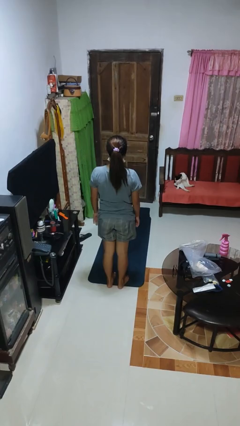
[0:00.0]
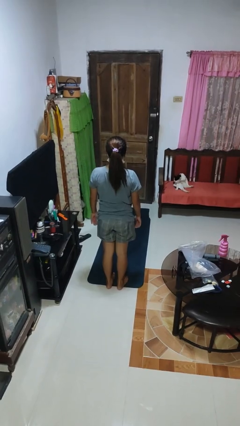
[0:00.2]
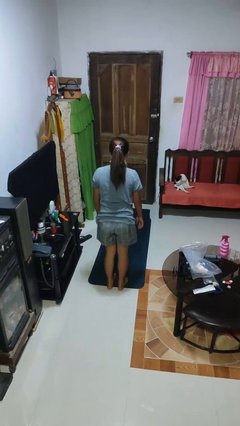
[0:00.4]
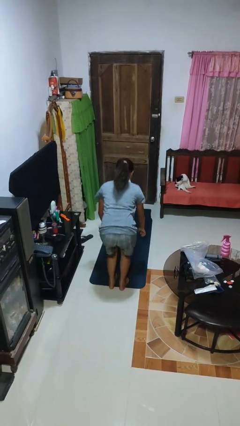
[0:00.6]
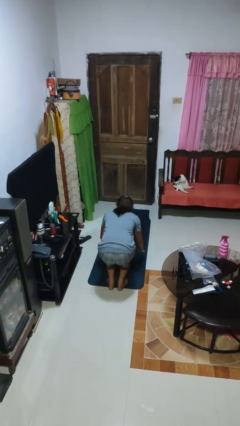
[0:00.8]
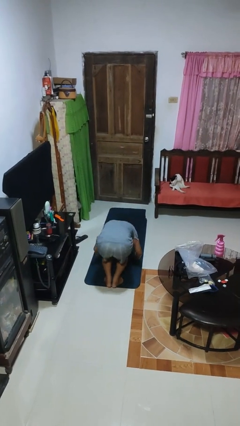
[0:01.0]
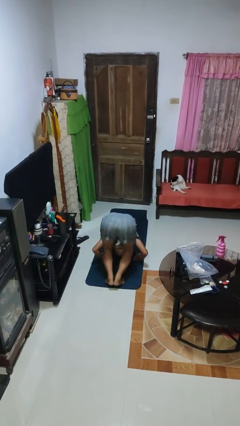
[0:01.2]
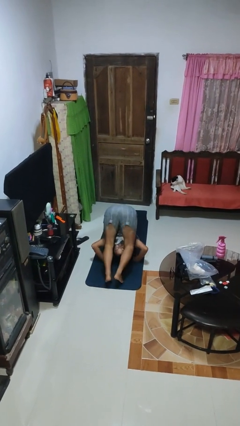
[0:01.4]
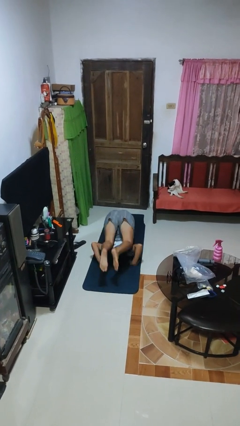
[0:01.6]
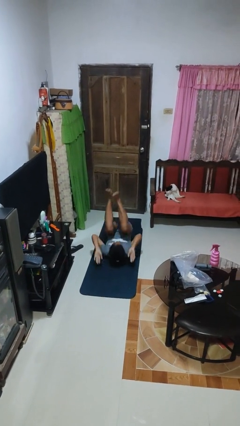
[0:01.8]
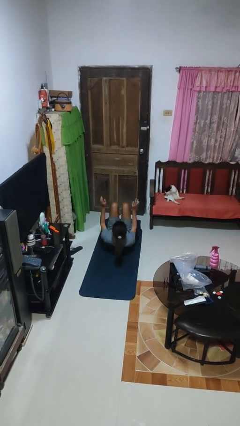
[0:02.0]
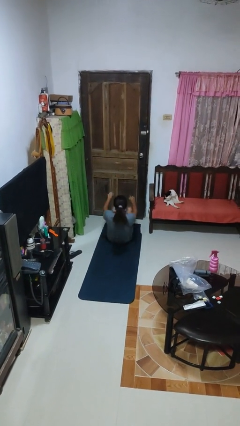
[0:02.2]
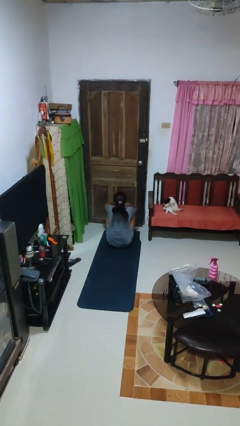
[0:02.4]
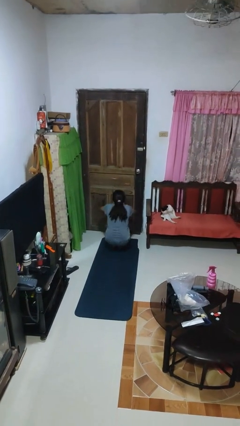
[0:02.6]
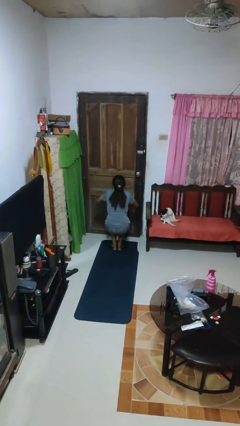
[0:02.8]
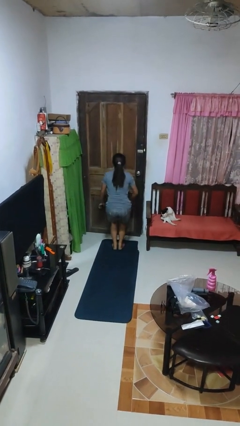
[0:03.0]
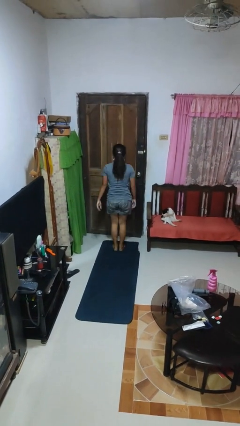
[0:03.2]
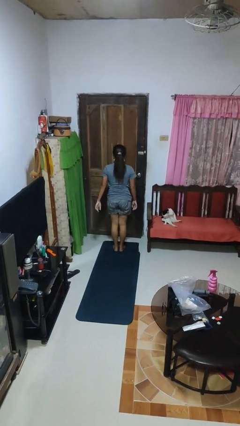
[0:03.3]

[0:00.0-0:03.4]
person somersaults

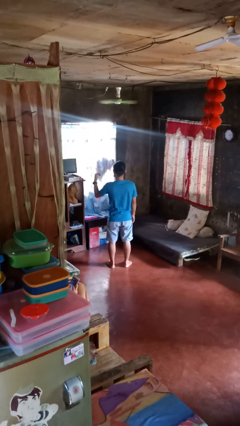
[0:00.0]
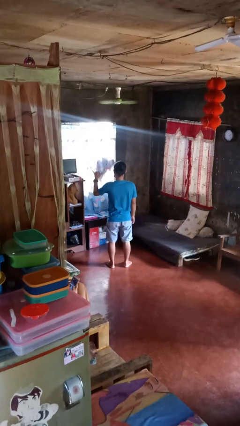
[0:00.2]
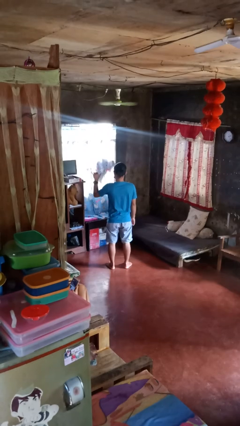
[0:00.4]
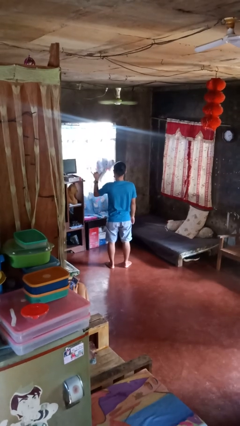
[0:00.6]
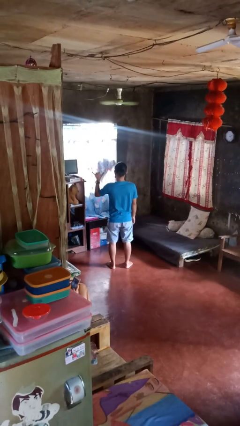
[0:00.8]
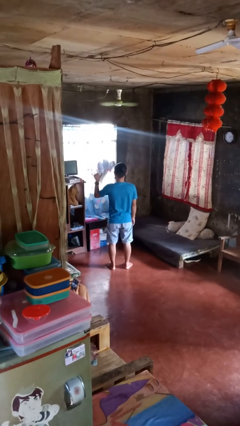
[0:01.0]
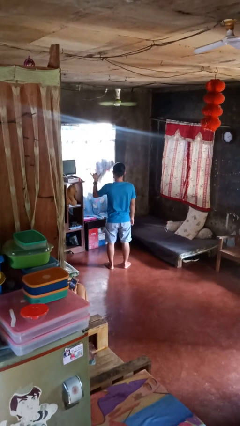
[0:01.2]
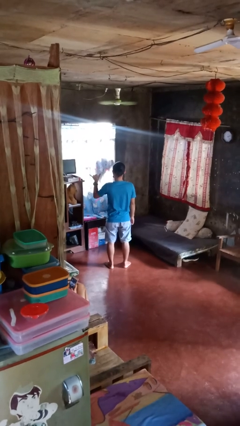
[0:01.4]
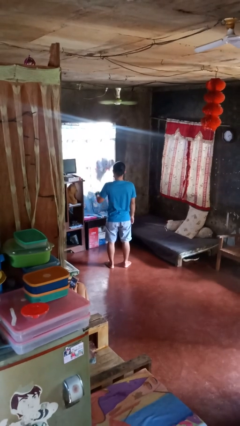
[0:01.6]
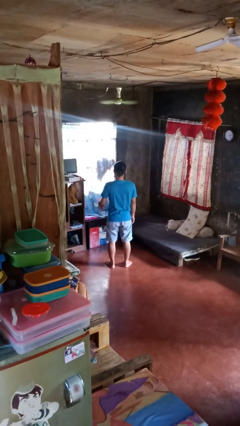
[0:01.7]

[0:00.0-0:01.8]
person gestures hang loose

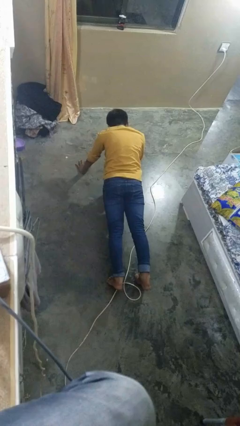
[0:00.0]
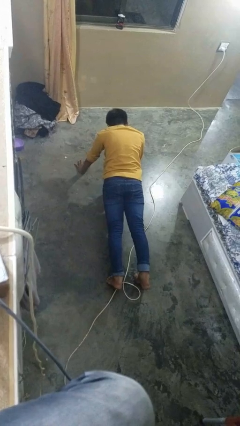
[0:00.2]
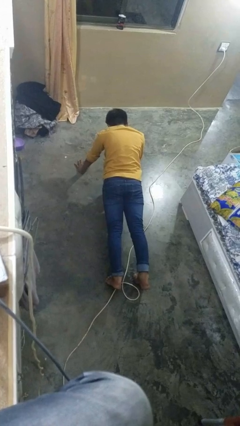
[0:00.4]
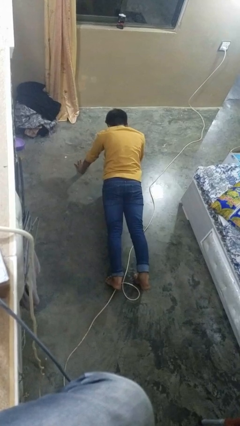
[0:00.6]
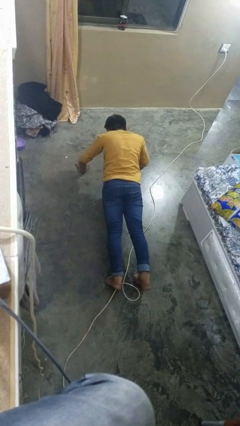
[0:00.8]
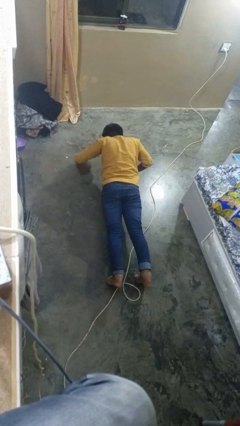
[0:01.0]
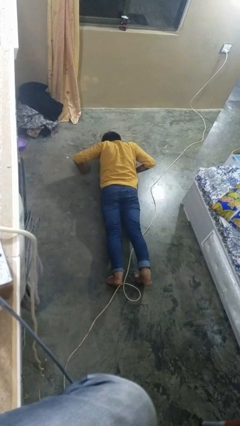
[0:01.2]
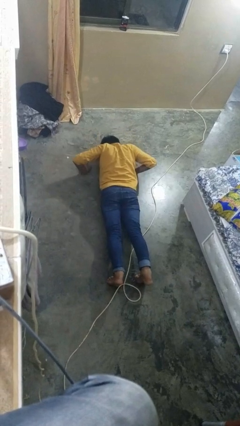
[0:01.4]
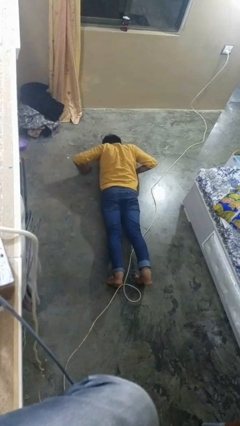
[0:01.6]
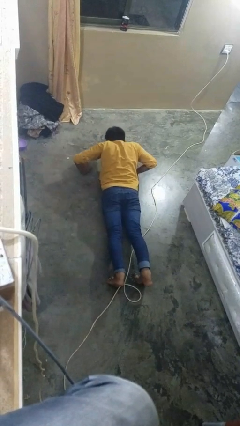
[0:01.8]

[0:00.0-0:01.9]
person exercises with pushup

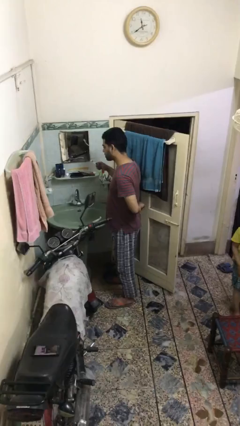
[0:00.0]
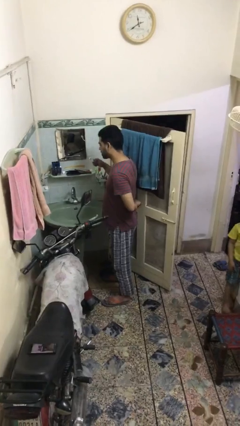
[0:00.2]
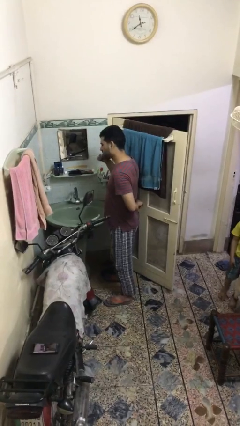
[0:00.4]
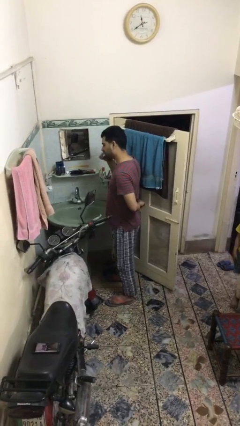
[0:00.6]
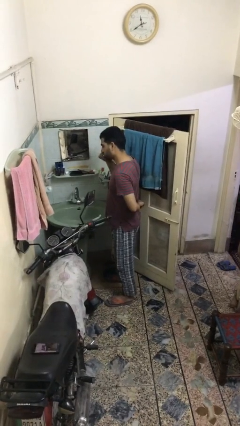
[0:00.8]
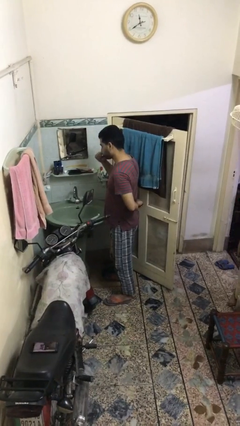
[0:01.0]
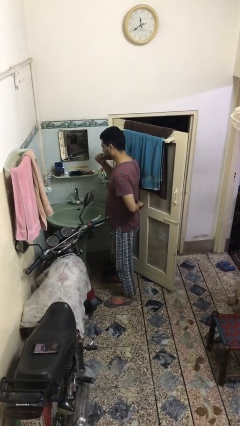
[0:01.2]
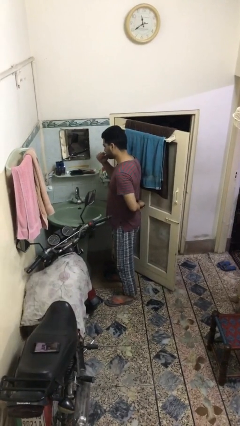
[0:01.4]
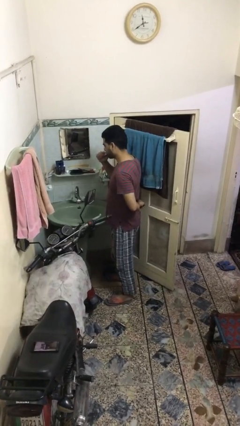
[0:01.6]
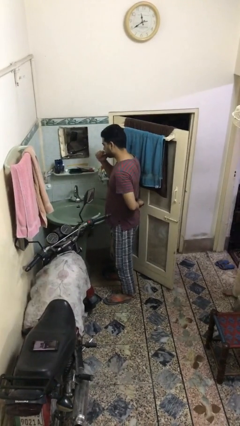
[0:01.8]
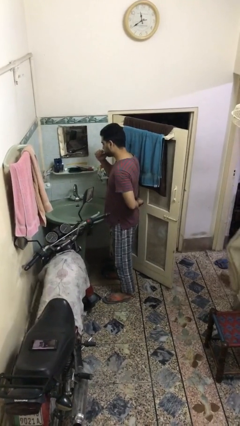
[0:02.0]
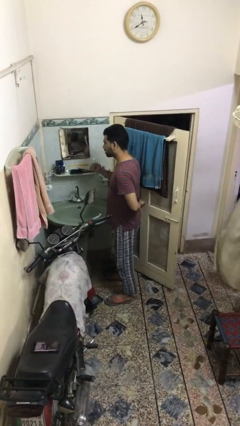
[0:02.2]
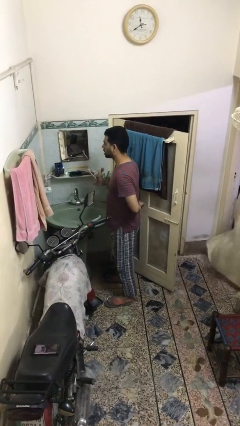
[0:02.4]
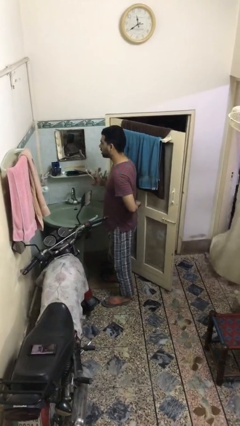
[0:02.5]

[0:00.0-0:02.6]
person brushes teeth

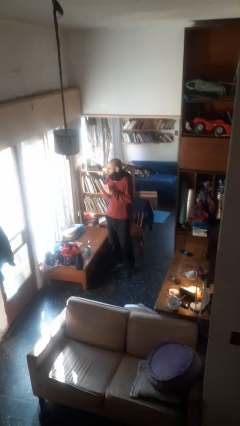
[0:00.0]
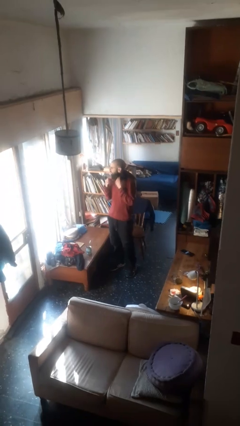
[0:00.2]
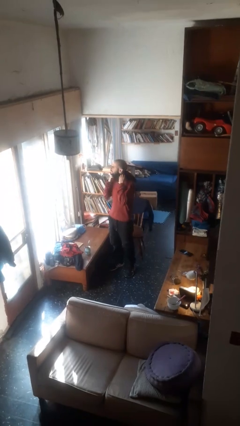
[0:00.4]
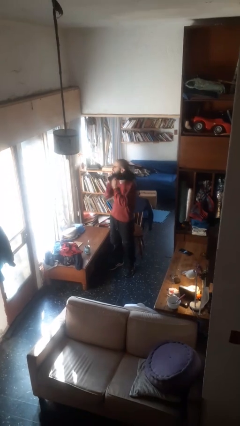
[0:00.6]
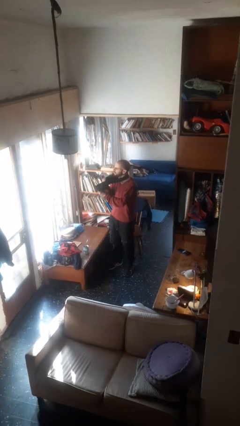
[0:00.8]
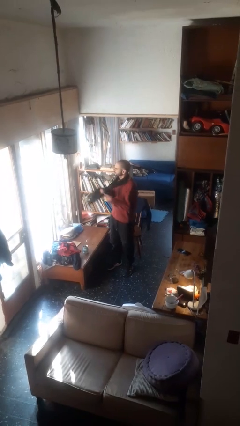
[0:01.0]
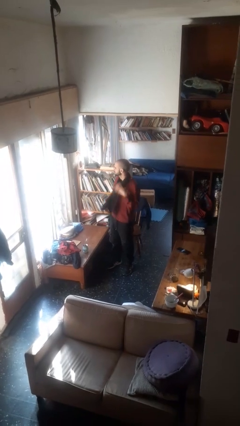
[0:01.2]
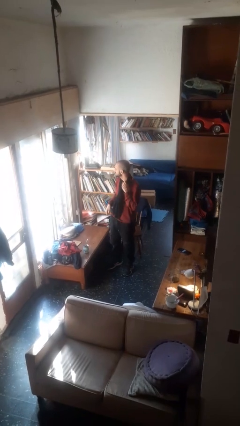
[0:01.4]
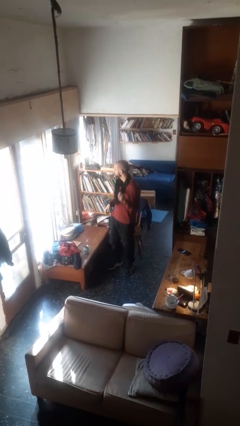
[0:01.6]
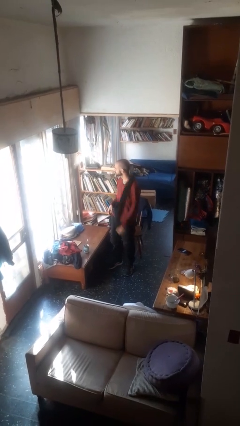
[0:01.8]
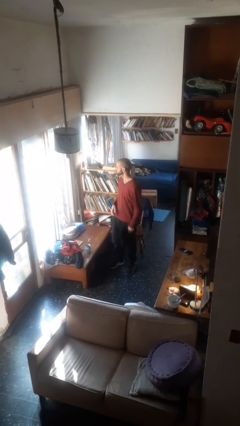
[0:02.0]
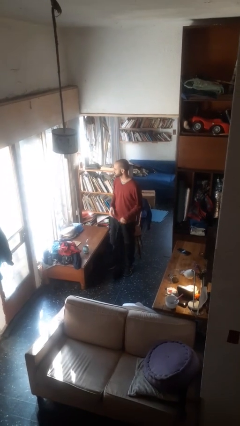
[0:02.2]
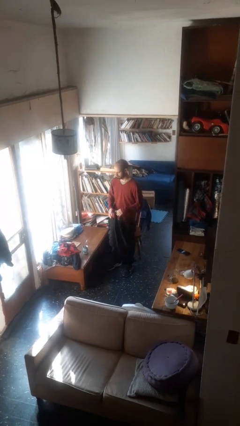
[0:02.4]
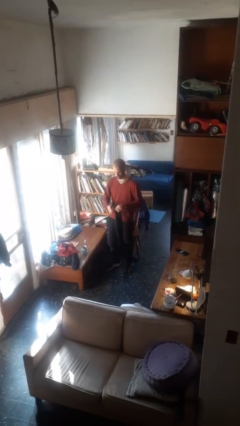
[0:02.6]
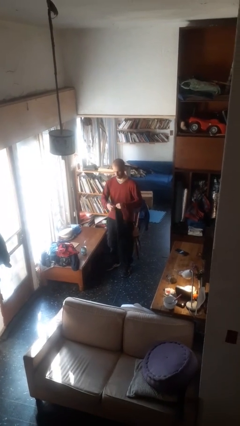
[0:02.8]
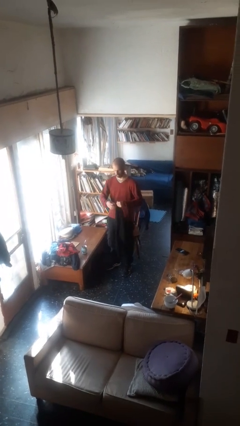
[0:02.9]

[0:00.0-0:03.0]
person takes off scarf

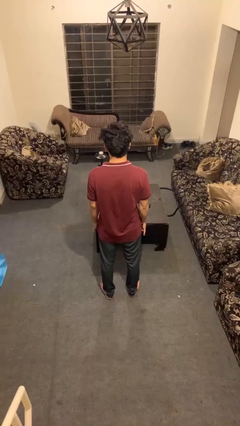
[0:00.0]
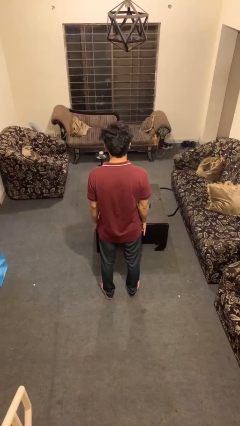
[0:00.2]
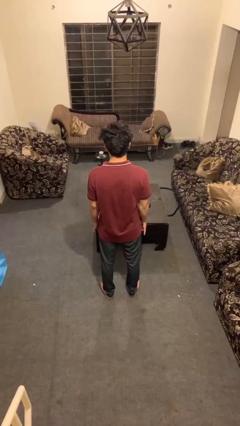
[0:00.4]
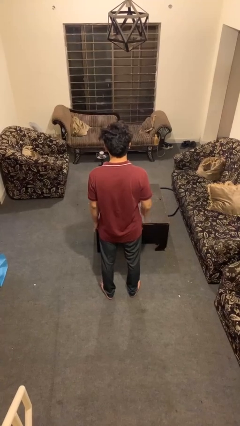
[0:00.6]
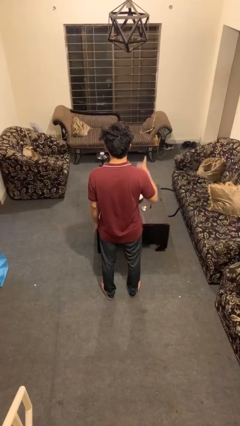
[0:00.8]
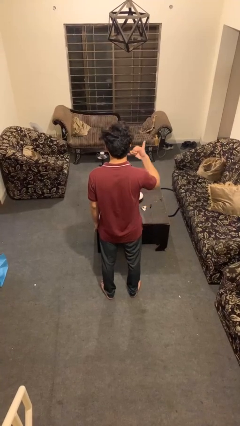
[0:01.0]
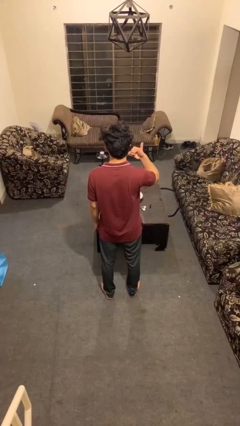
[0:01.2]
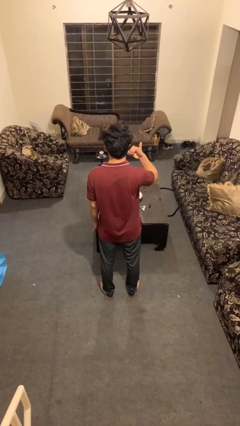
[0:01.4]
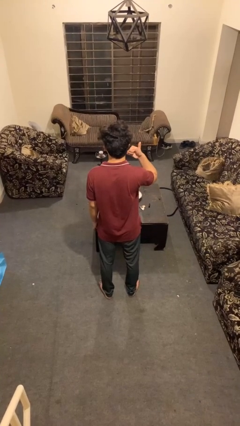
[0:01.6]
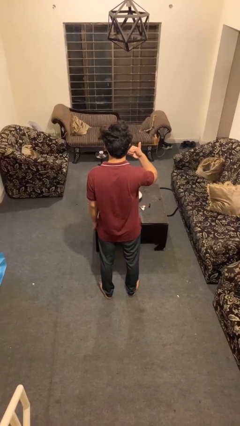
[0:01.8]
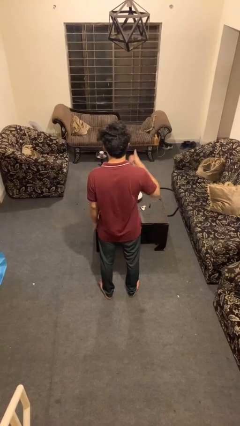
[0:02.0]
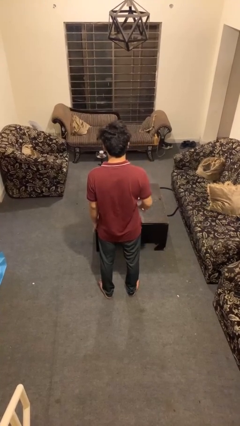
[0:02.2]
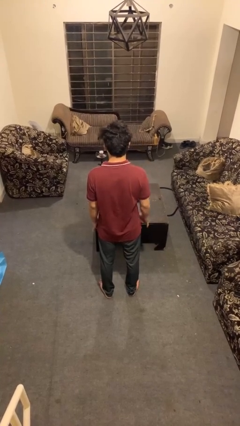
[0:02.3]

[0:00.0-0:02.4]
person gestures call me

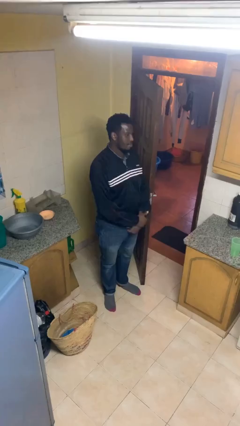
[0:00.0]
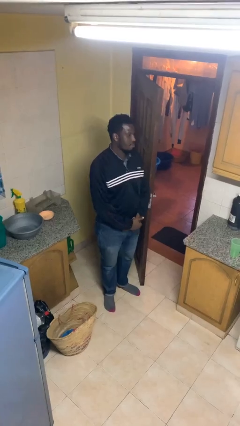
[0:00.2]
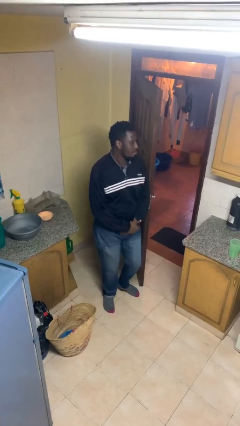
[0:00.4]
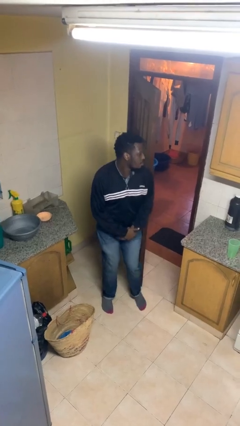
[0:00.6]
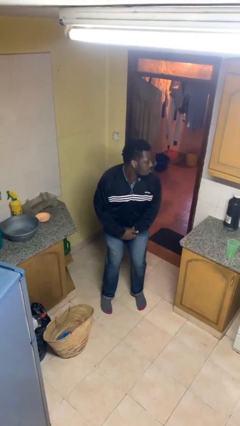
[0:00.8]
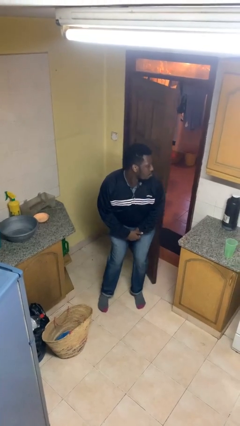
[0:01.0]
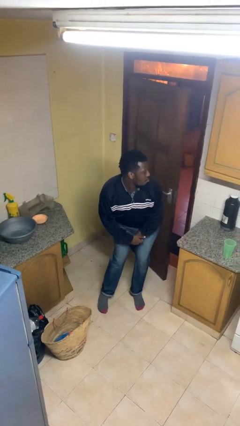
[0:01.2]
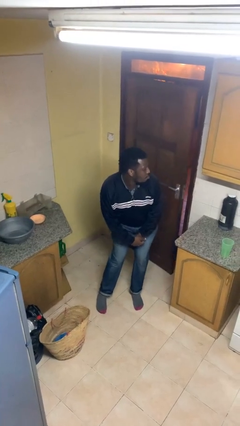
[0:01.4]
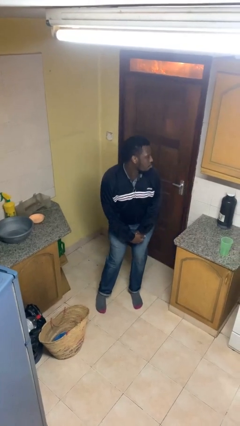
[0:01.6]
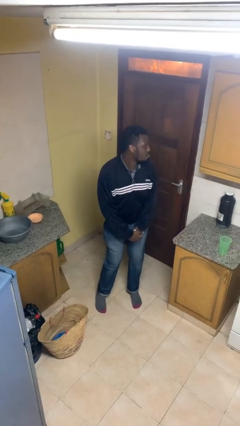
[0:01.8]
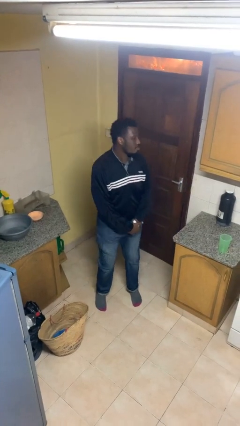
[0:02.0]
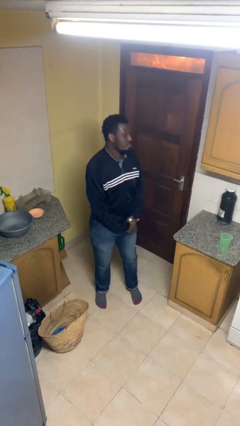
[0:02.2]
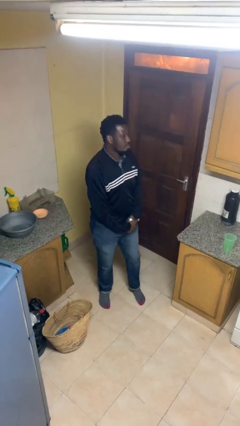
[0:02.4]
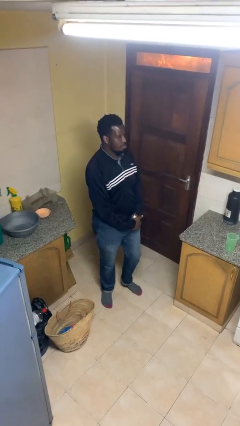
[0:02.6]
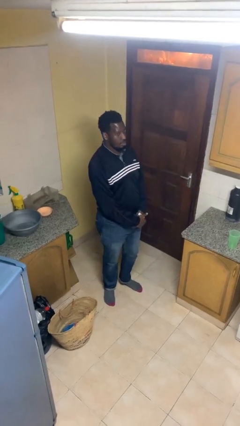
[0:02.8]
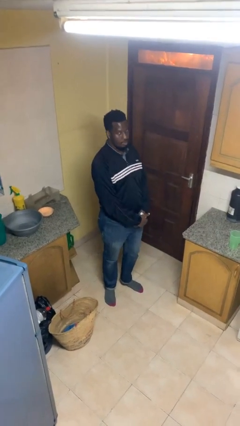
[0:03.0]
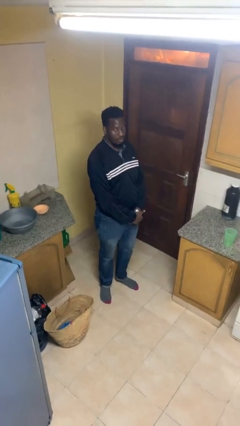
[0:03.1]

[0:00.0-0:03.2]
person closes door with hip
